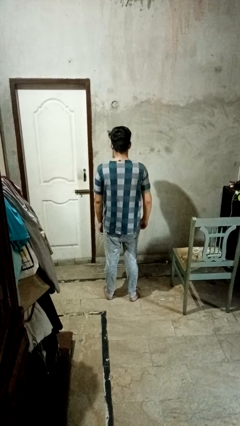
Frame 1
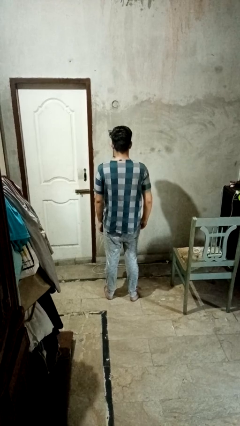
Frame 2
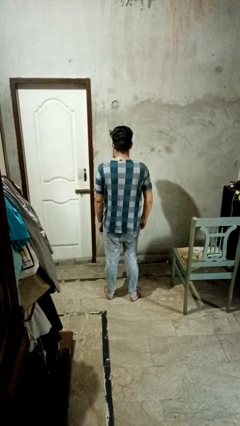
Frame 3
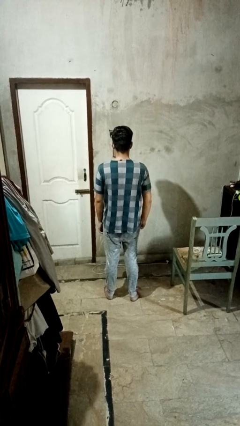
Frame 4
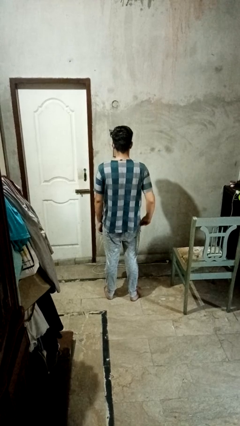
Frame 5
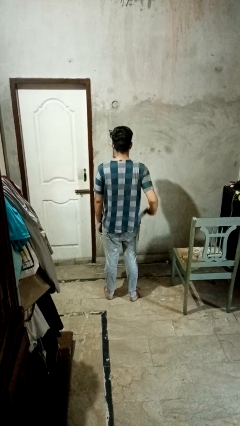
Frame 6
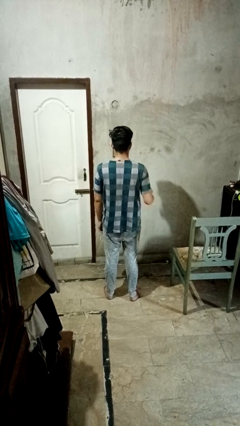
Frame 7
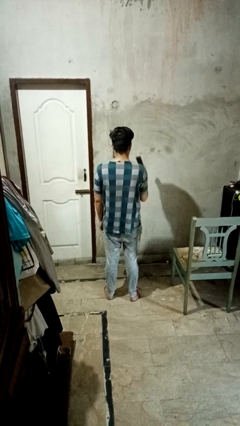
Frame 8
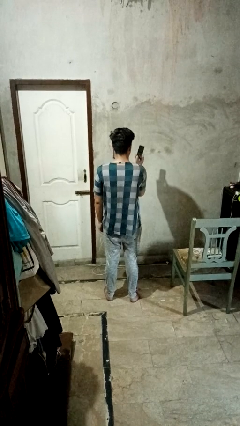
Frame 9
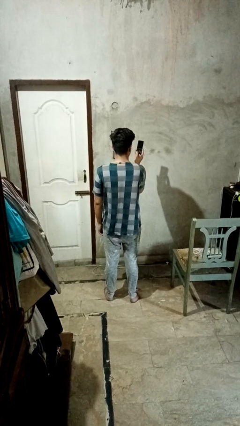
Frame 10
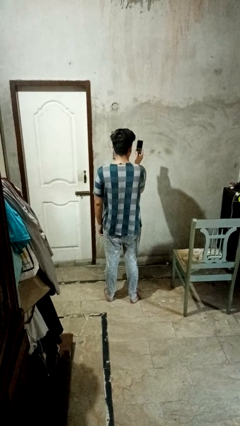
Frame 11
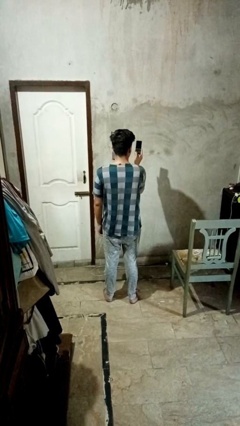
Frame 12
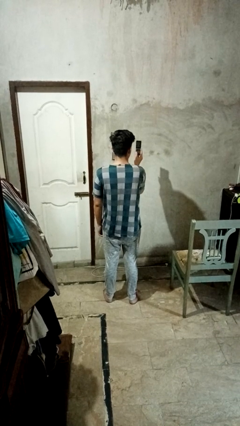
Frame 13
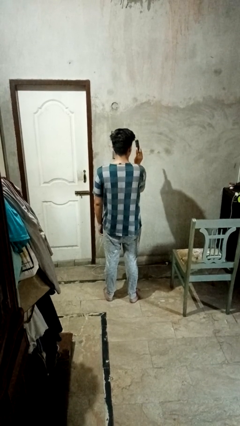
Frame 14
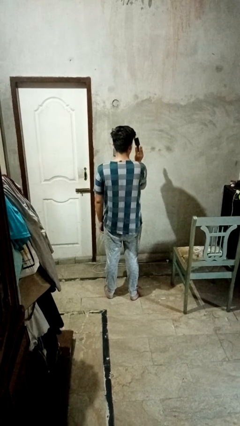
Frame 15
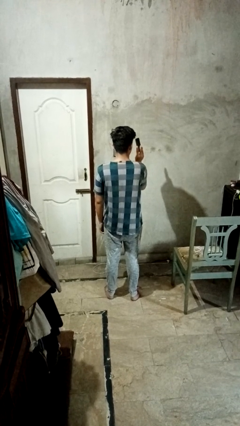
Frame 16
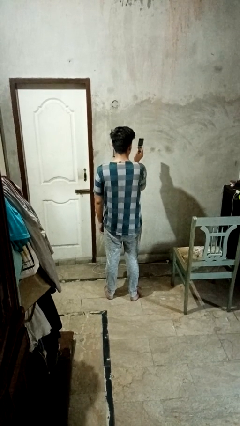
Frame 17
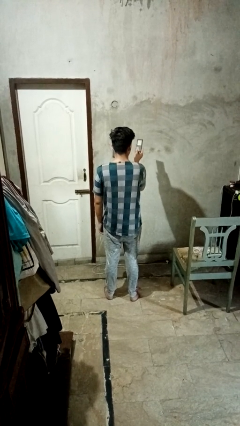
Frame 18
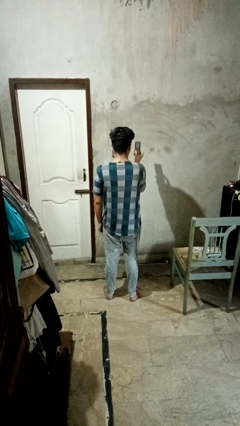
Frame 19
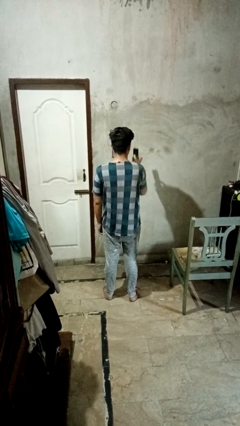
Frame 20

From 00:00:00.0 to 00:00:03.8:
person takes phone from pocket

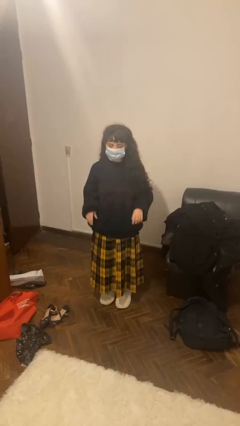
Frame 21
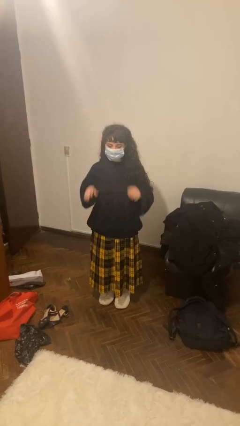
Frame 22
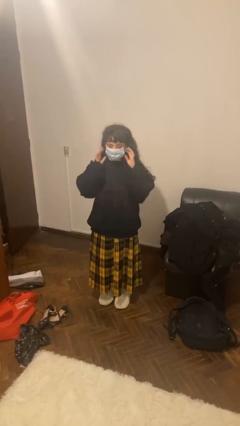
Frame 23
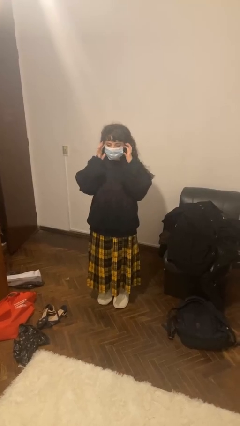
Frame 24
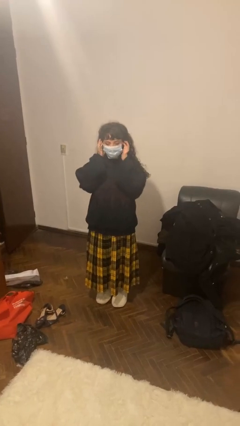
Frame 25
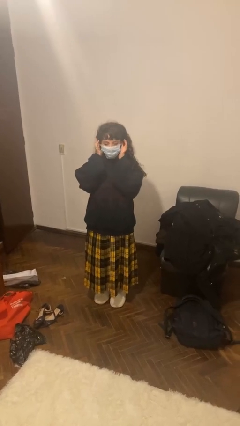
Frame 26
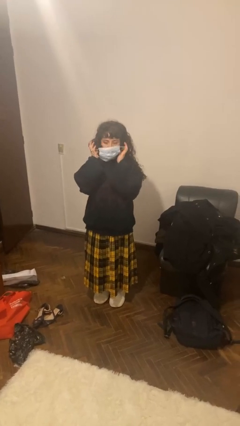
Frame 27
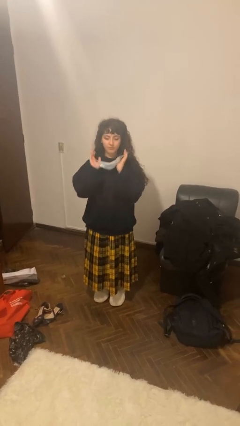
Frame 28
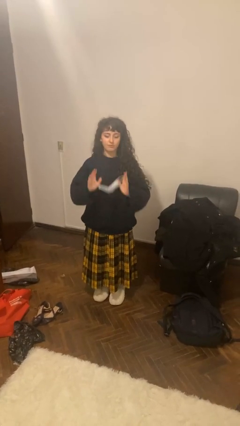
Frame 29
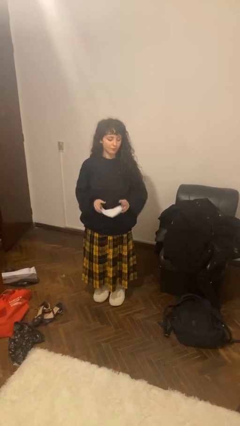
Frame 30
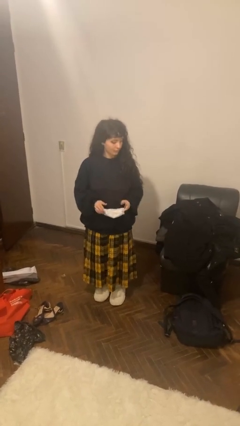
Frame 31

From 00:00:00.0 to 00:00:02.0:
person takes off facemask

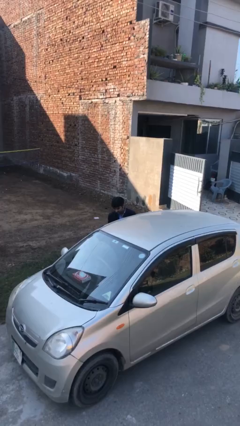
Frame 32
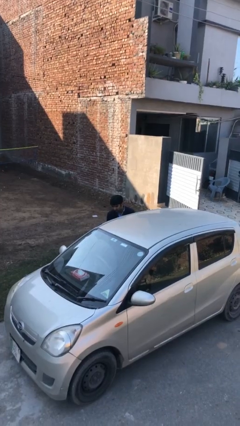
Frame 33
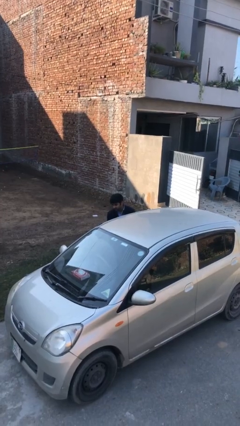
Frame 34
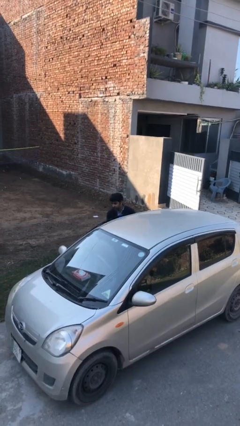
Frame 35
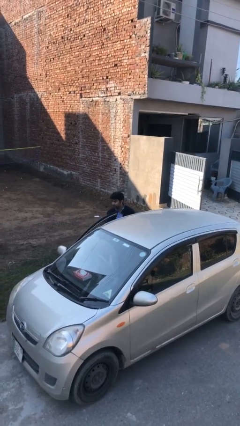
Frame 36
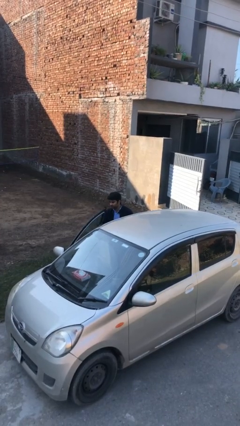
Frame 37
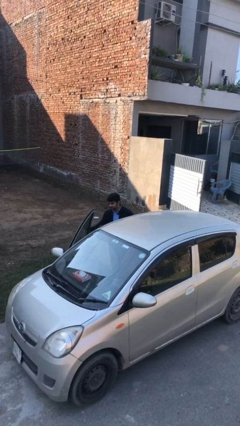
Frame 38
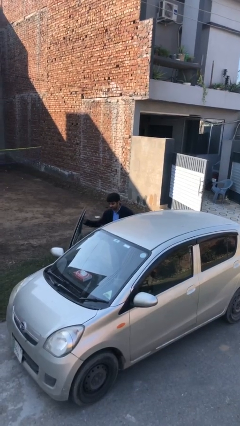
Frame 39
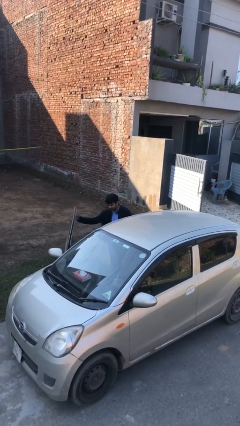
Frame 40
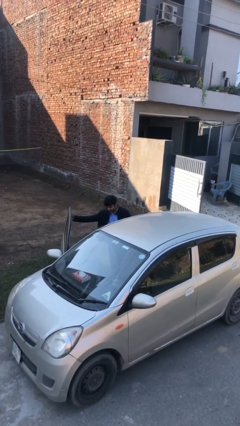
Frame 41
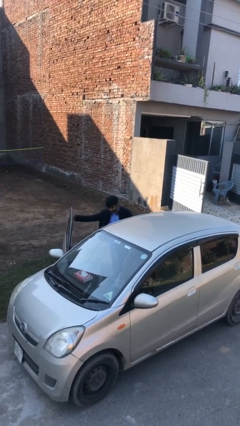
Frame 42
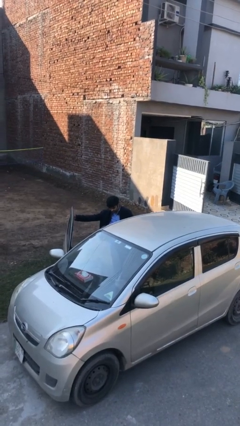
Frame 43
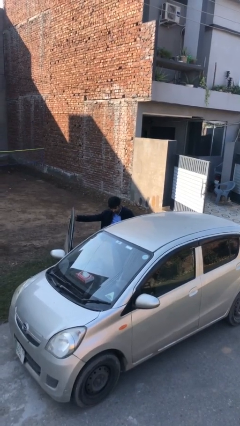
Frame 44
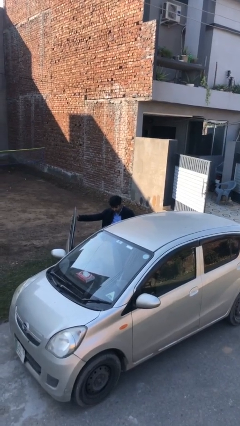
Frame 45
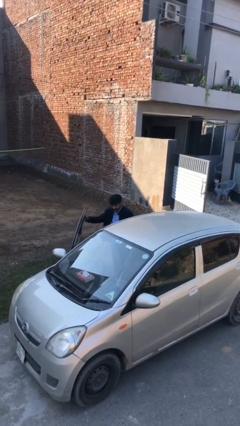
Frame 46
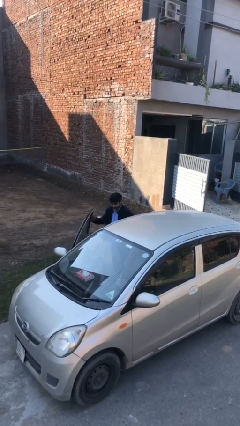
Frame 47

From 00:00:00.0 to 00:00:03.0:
person opens car door

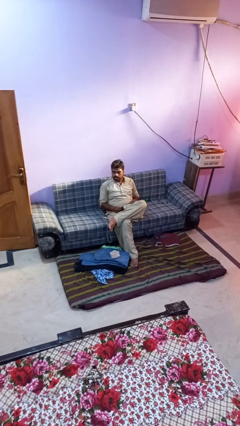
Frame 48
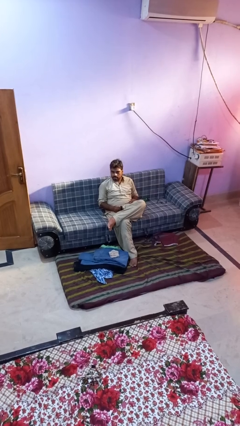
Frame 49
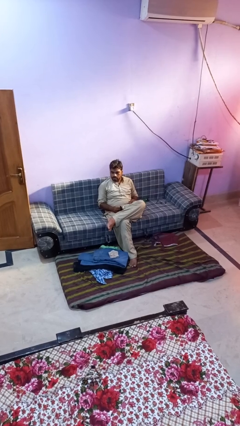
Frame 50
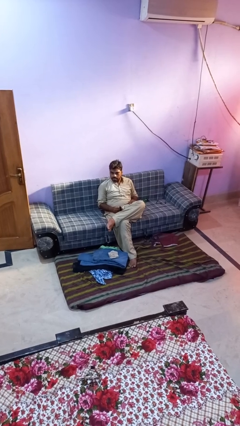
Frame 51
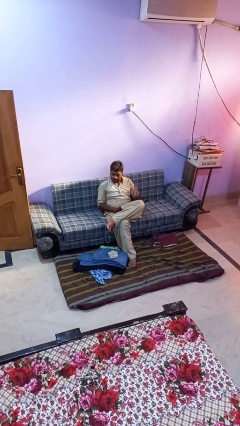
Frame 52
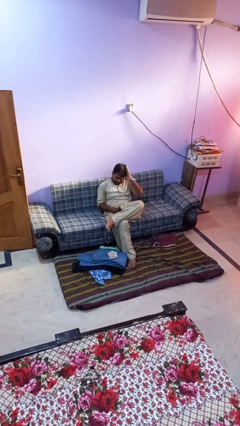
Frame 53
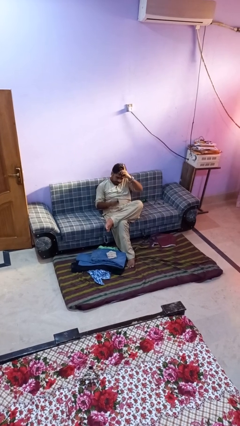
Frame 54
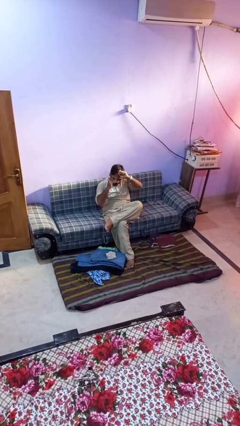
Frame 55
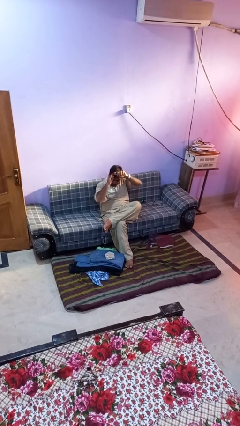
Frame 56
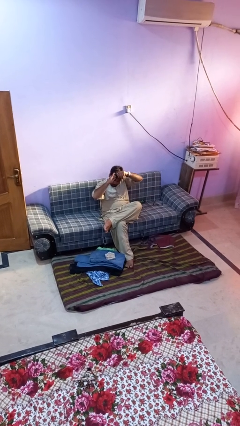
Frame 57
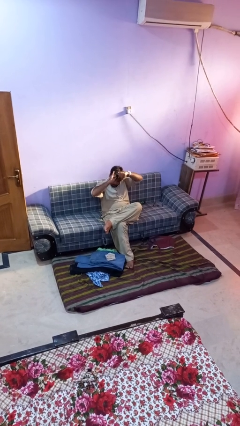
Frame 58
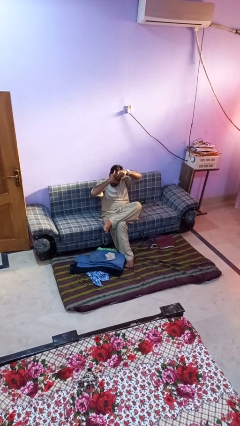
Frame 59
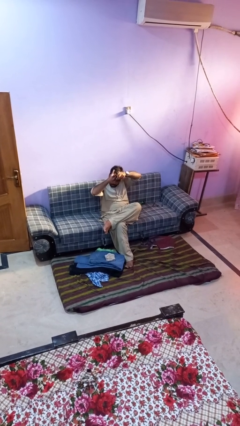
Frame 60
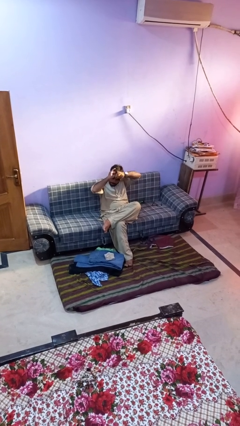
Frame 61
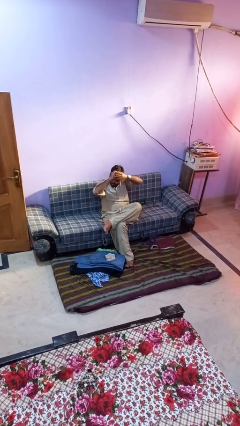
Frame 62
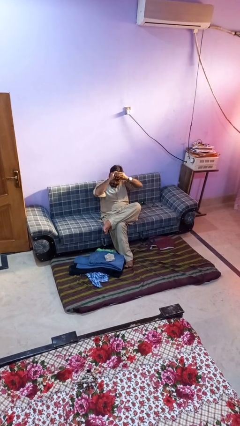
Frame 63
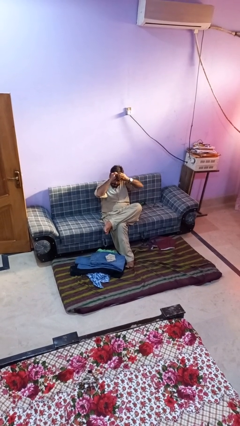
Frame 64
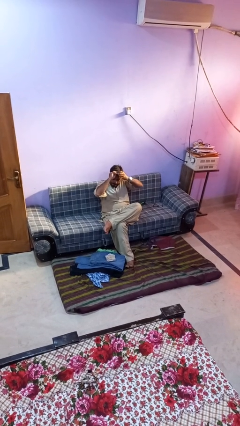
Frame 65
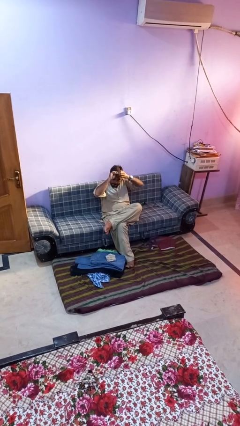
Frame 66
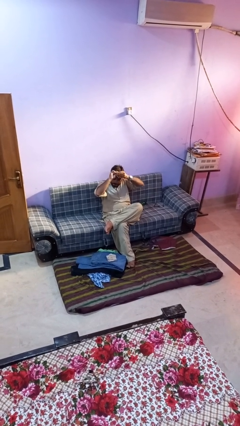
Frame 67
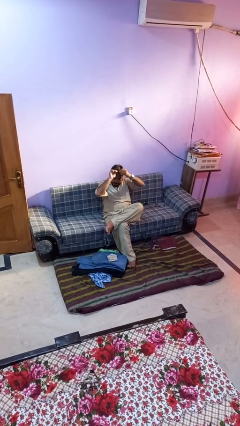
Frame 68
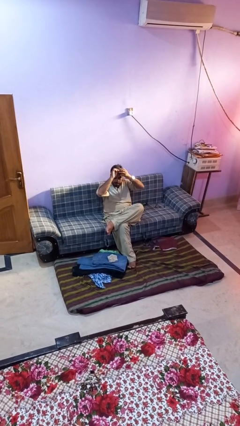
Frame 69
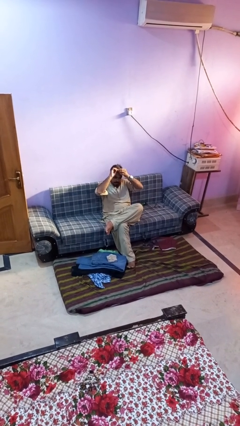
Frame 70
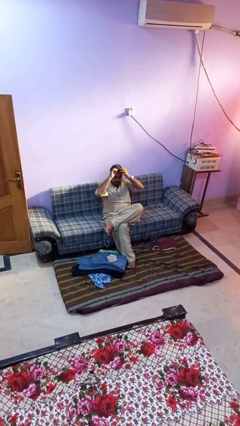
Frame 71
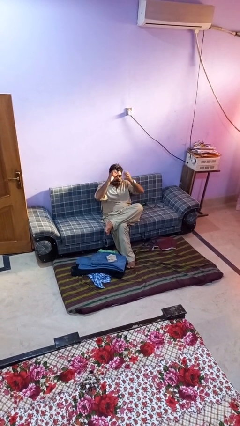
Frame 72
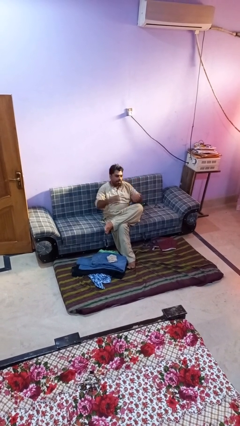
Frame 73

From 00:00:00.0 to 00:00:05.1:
person puts hair in ponytail

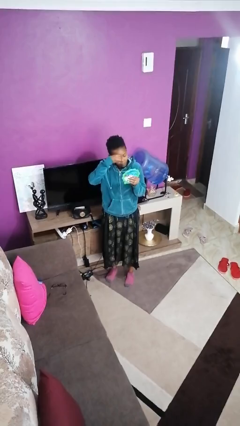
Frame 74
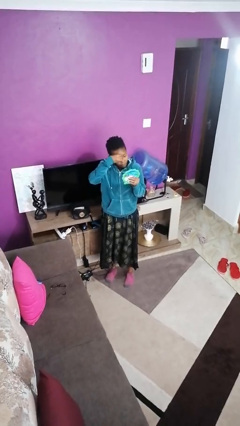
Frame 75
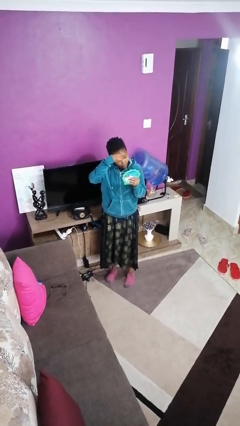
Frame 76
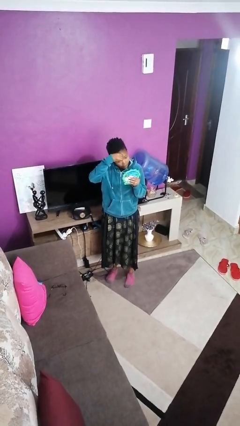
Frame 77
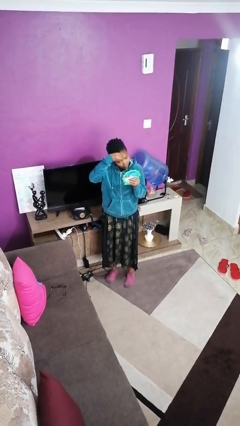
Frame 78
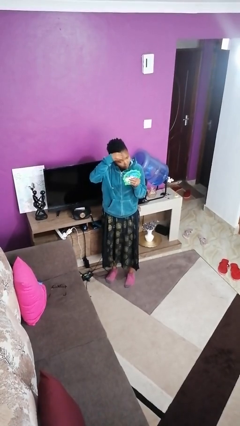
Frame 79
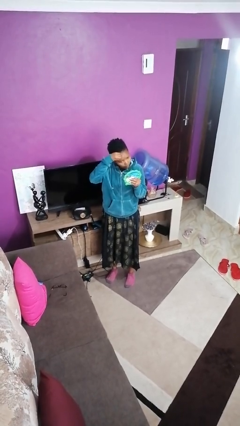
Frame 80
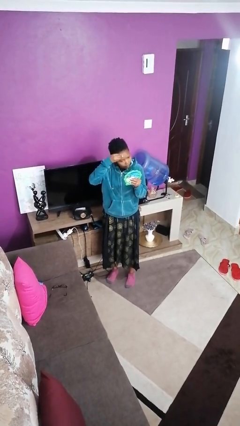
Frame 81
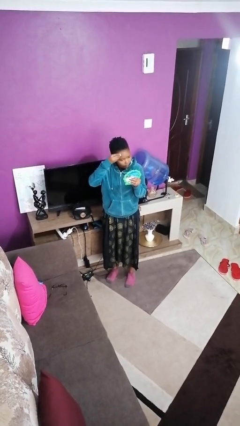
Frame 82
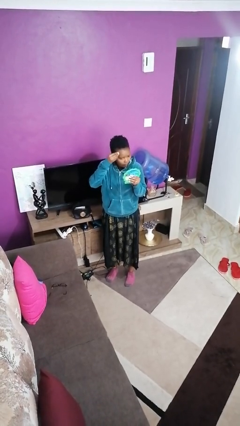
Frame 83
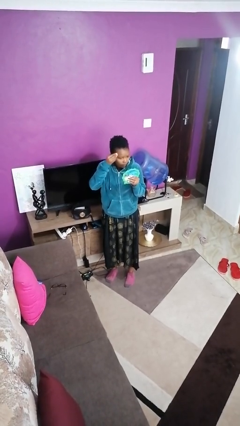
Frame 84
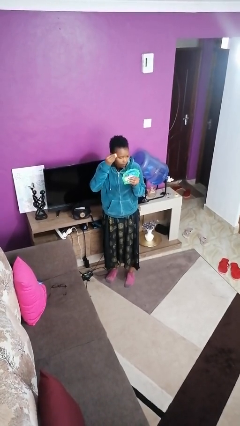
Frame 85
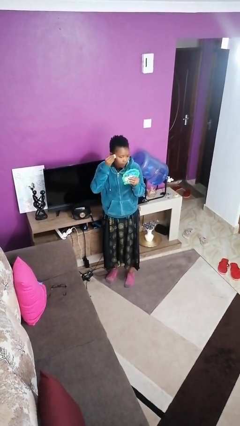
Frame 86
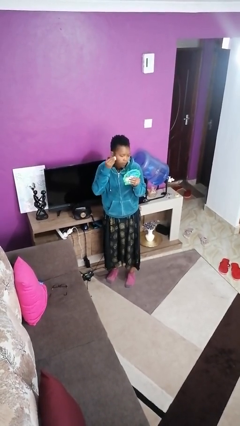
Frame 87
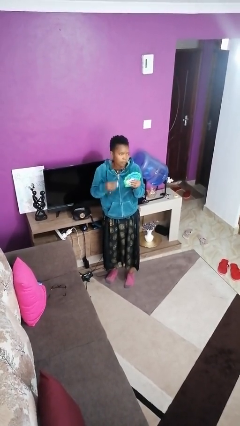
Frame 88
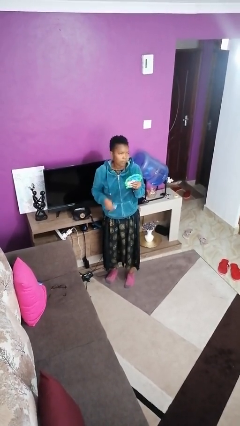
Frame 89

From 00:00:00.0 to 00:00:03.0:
person applies foundation makeup

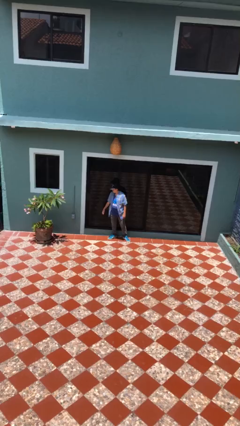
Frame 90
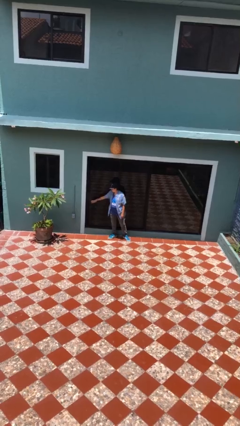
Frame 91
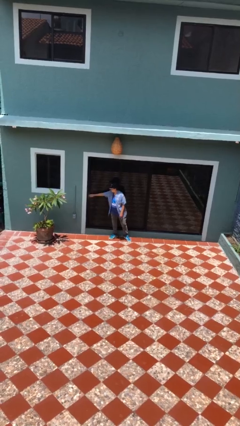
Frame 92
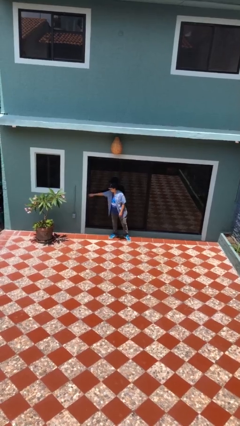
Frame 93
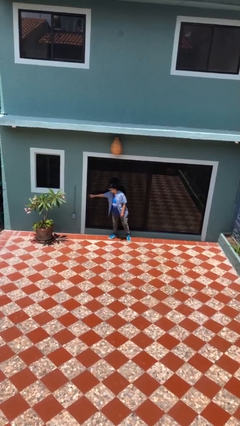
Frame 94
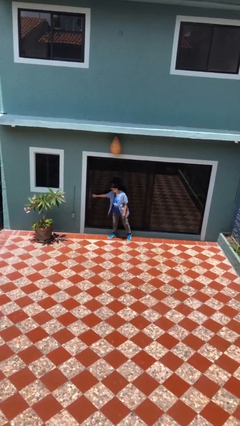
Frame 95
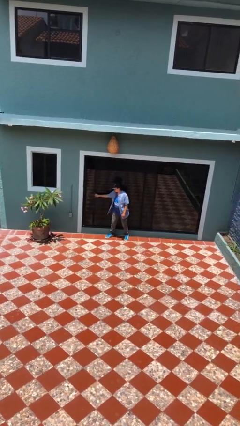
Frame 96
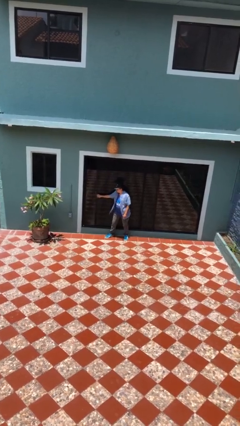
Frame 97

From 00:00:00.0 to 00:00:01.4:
person opens sliding door
